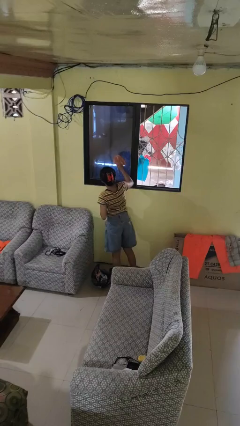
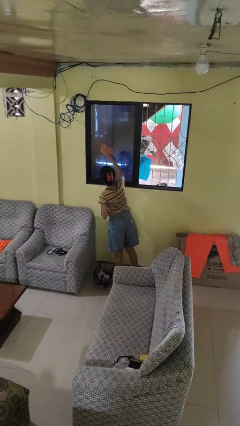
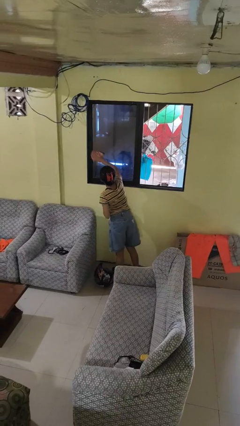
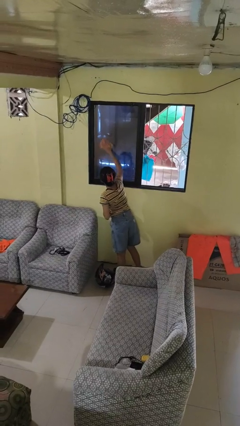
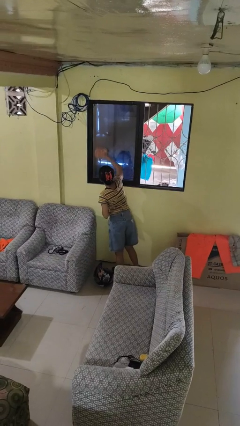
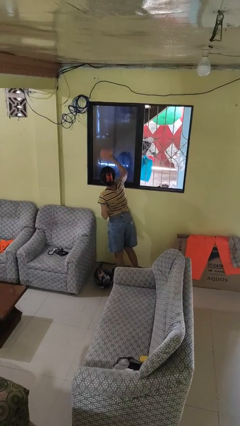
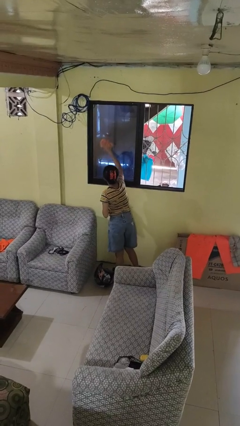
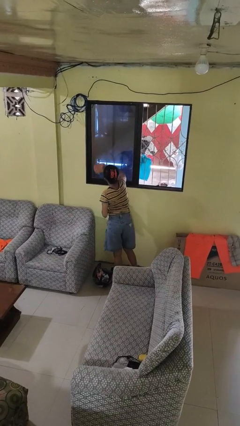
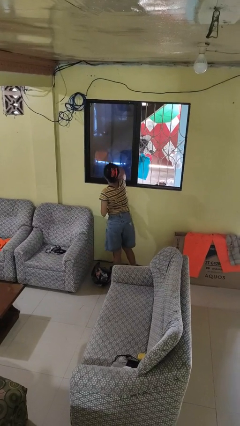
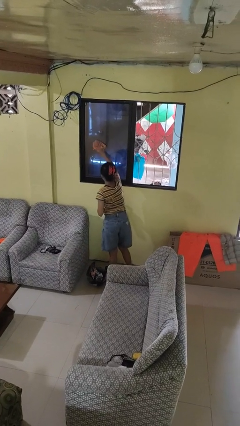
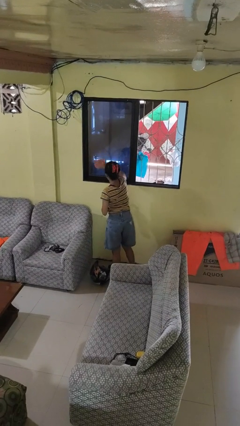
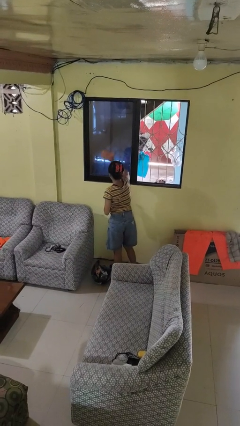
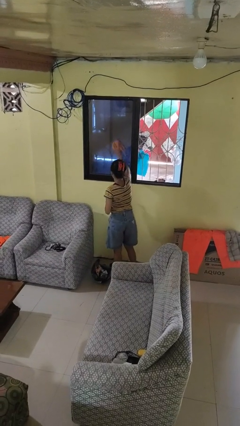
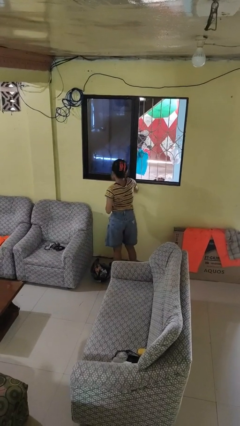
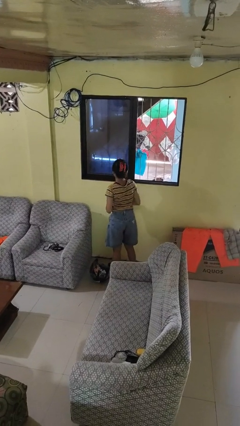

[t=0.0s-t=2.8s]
person washes window

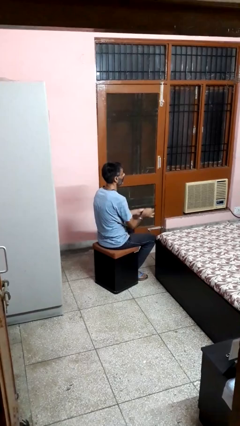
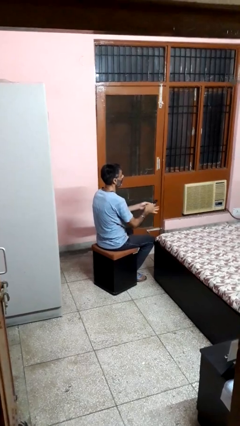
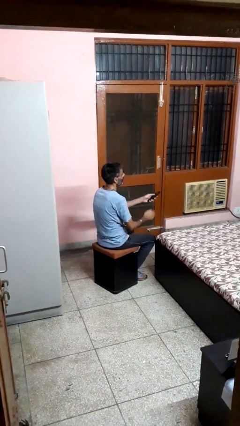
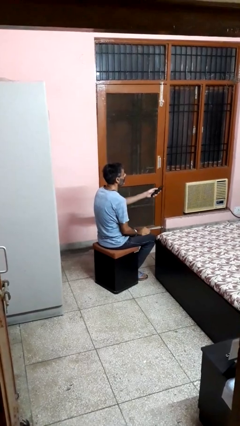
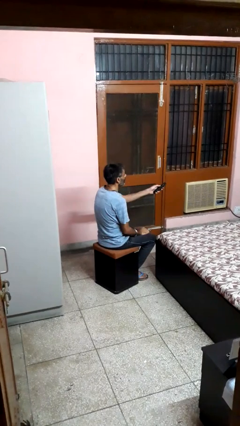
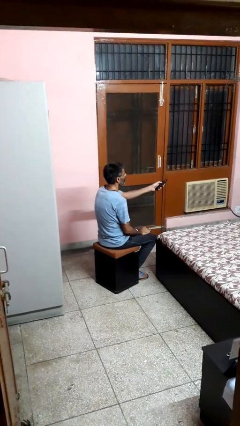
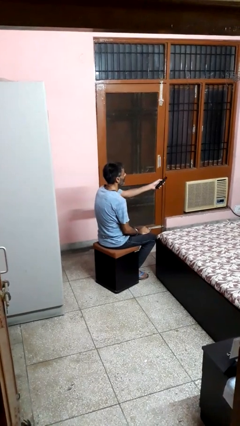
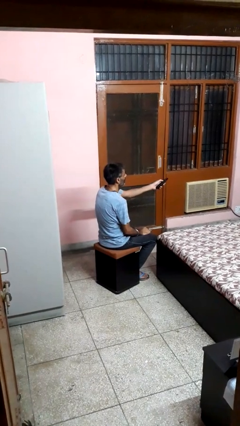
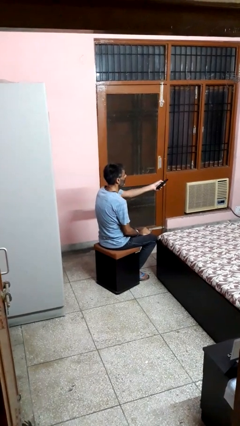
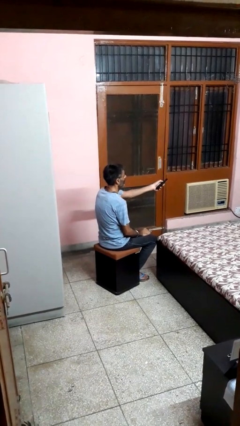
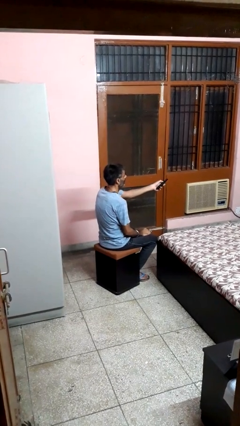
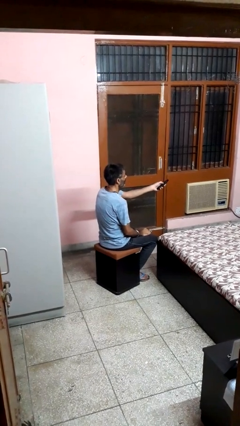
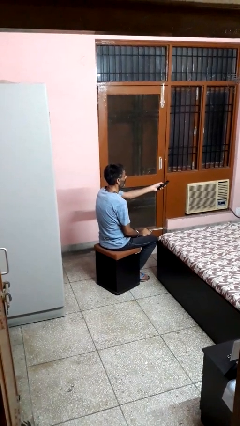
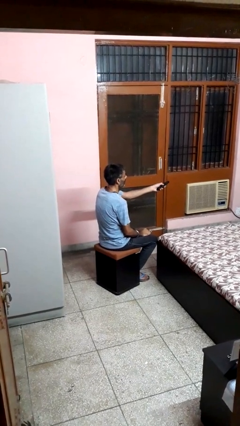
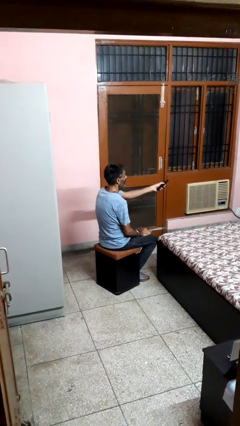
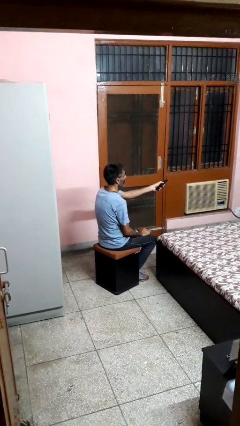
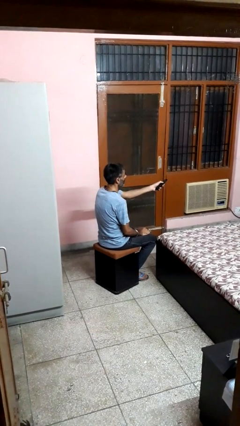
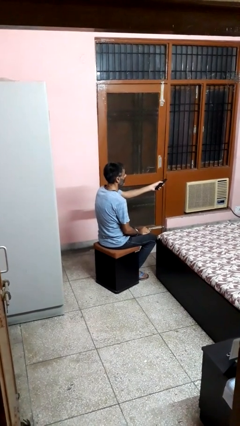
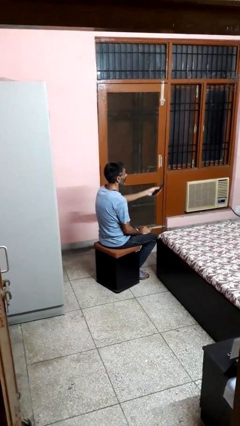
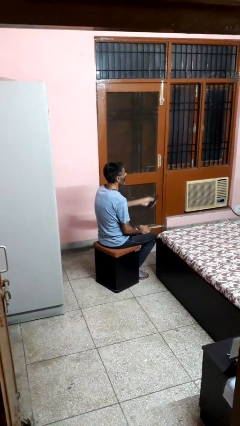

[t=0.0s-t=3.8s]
person uses television remote

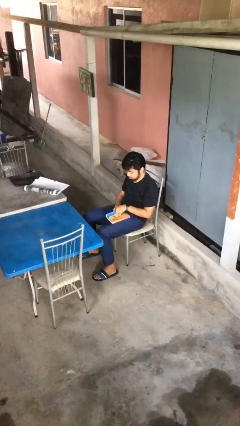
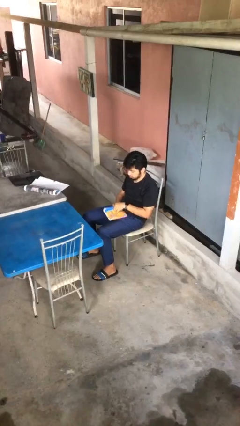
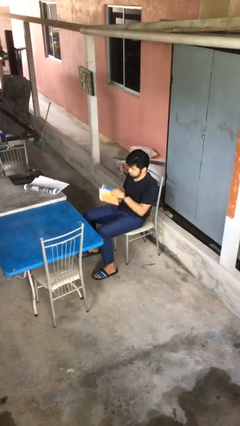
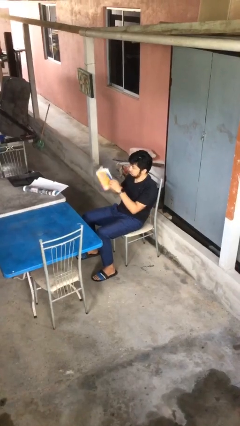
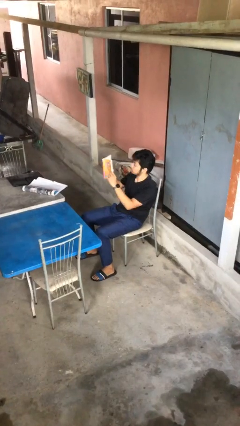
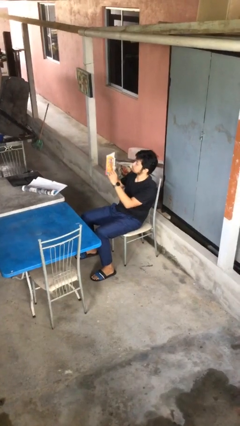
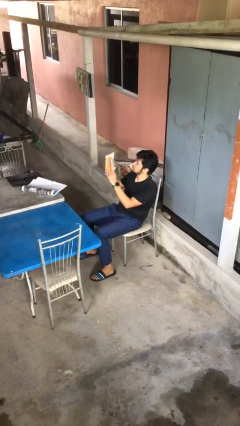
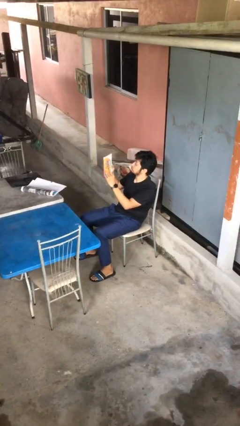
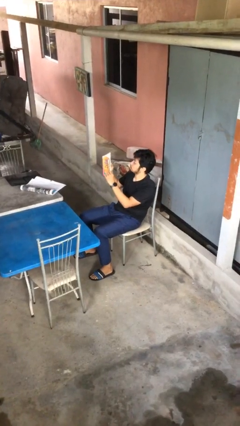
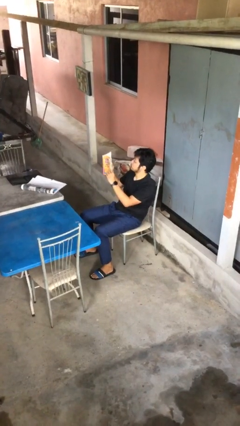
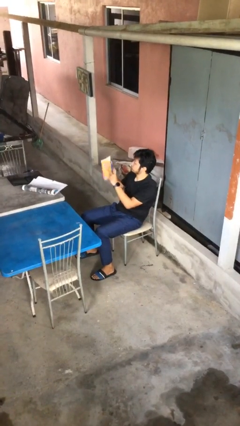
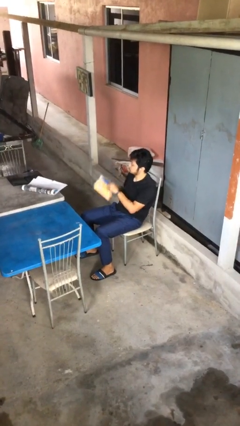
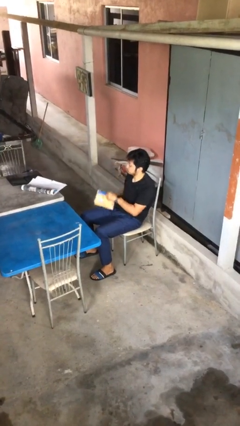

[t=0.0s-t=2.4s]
person reads book

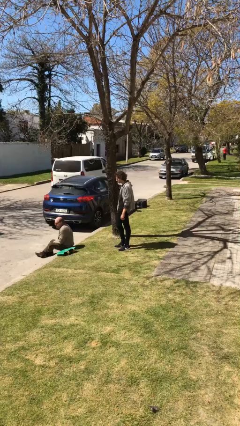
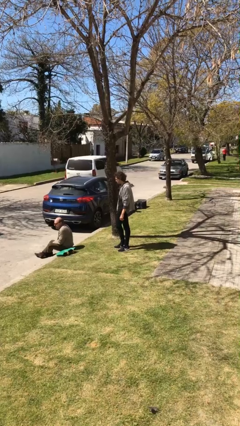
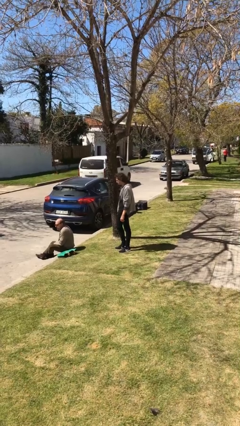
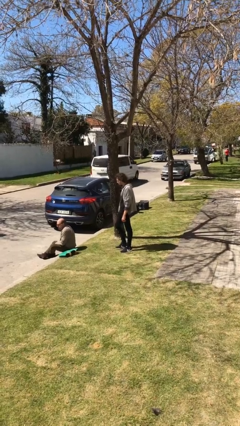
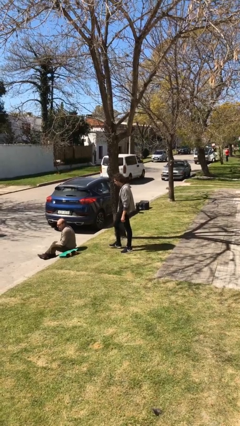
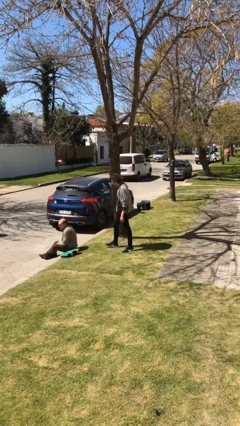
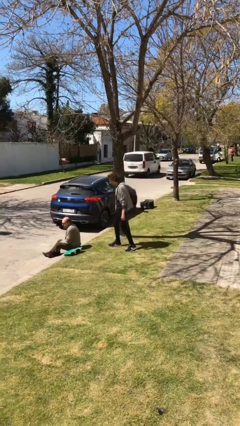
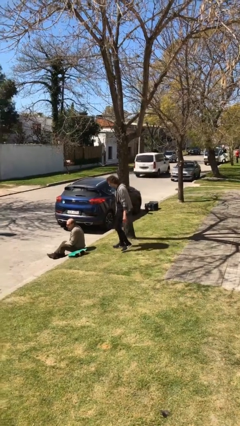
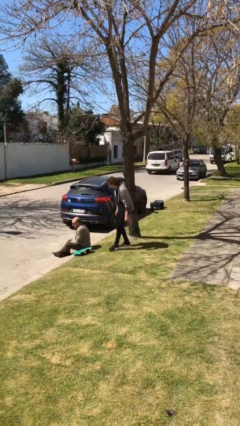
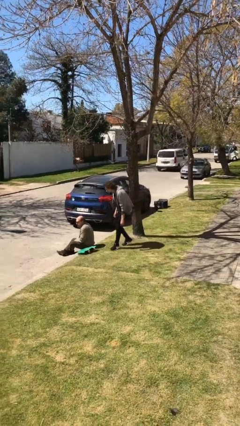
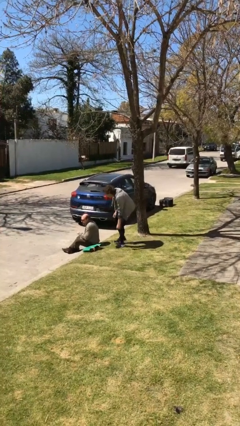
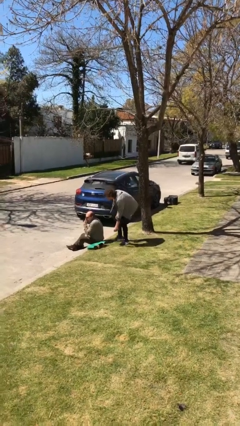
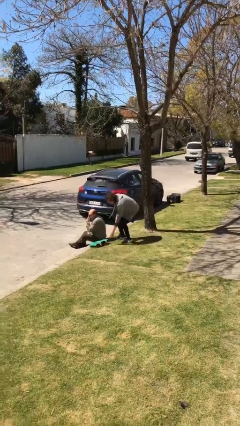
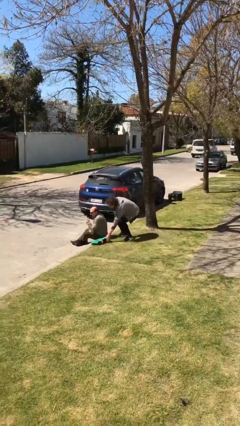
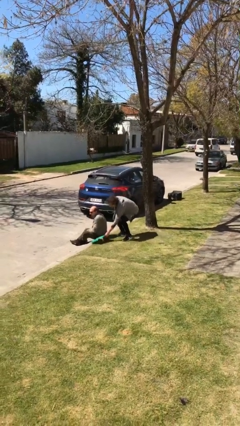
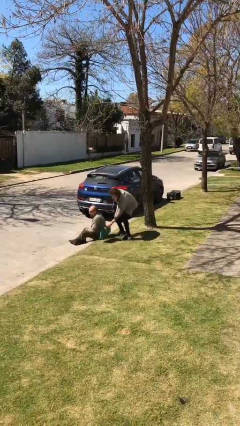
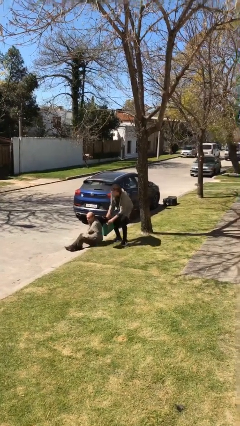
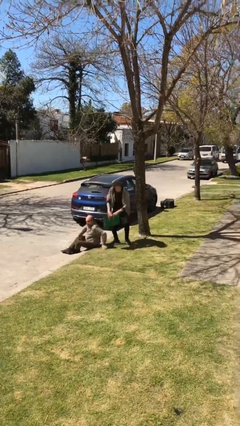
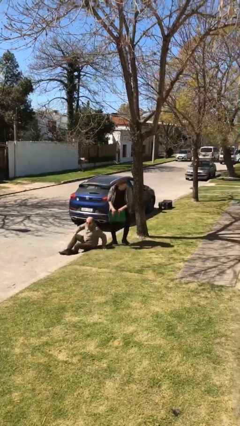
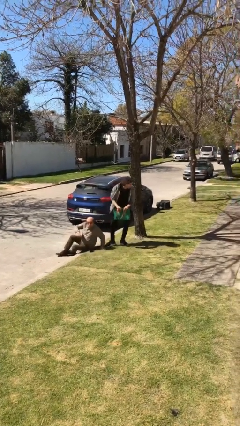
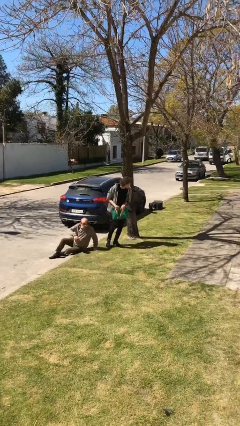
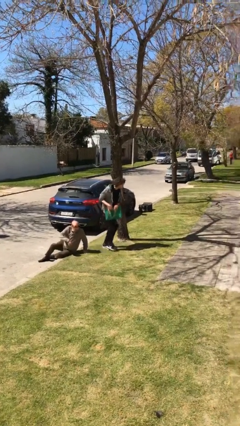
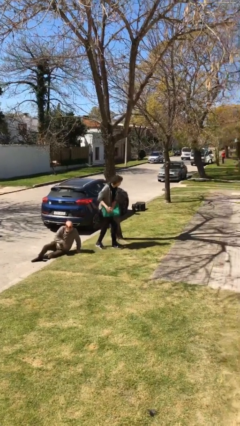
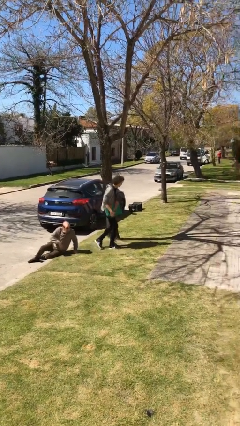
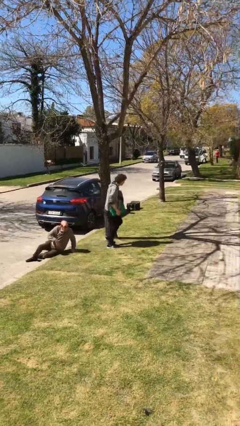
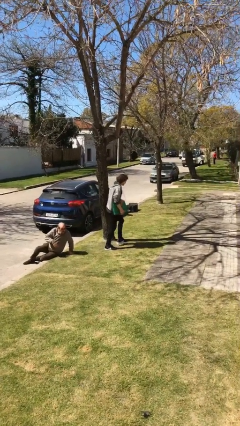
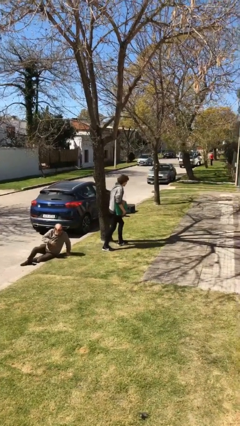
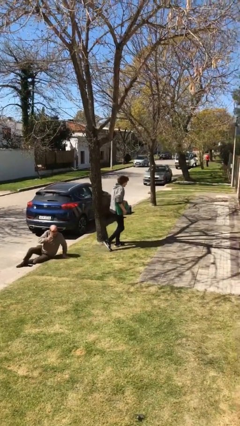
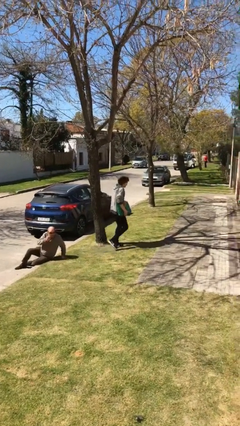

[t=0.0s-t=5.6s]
person steals object from person

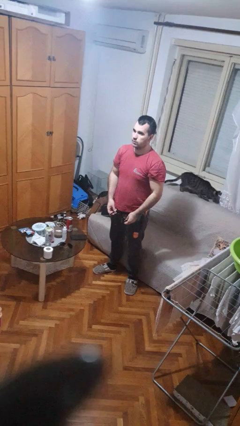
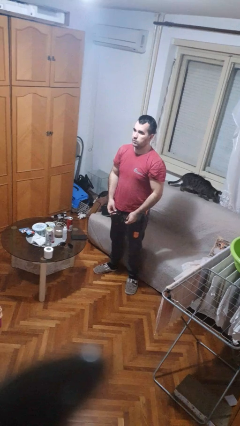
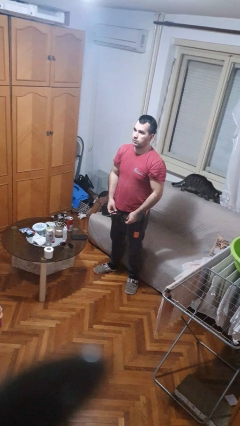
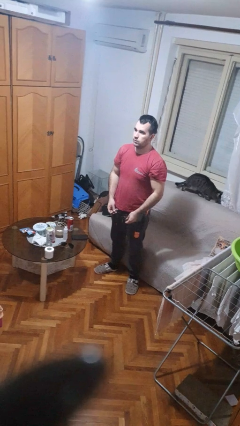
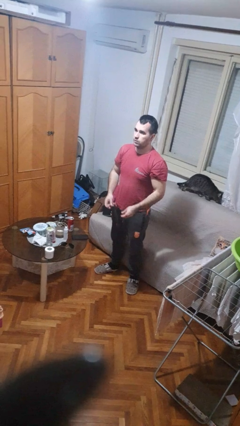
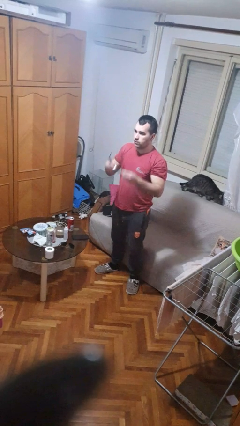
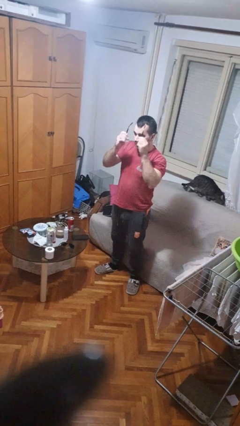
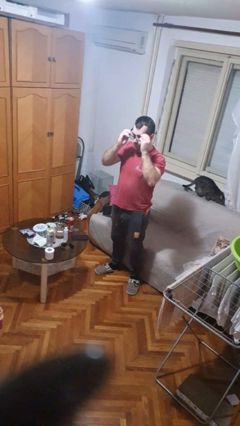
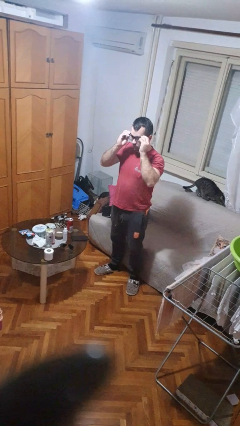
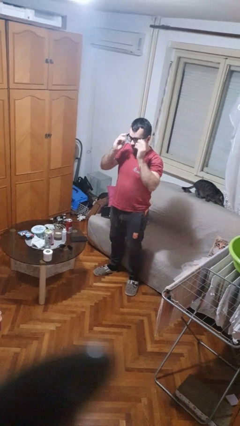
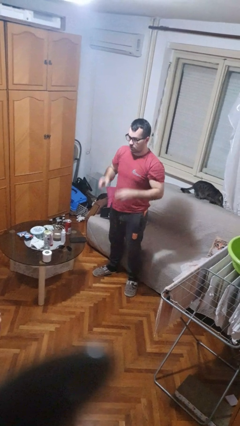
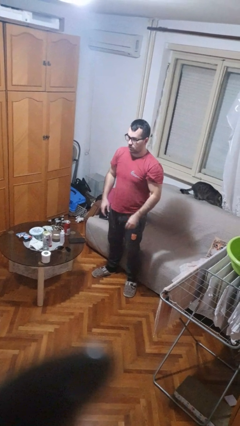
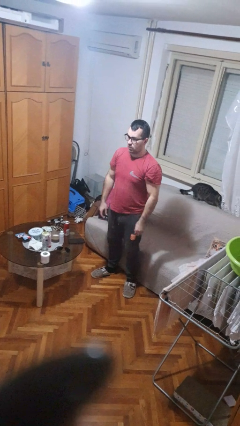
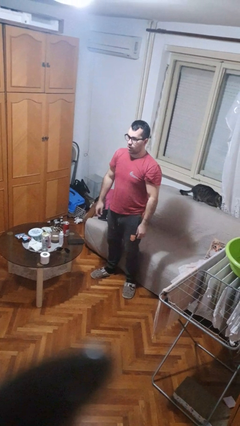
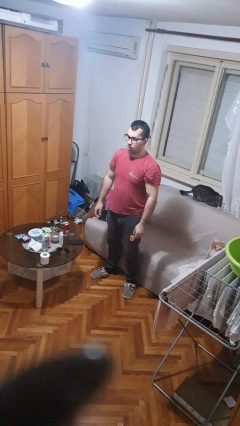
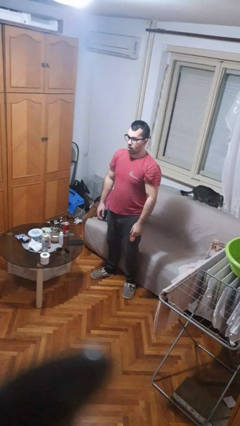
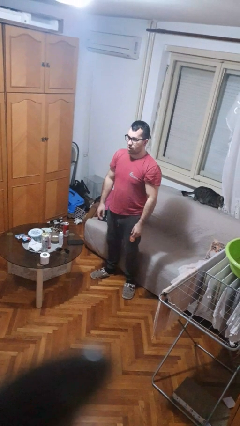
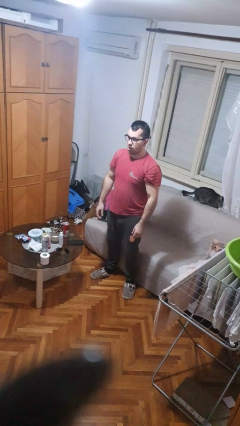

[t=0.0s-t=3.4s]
person puts on glasses
